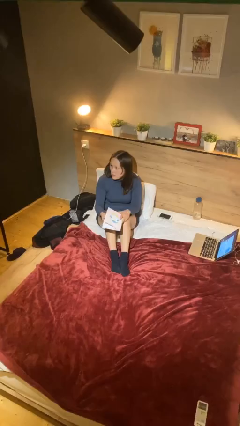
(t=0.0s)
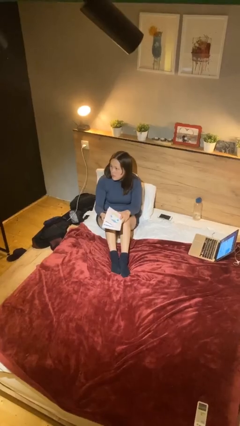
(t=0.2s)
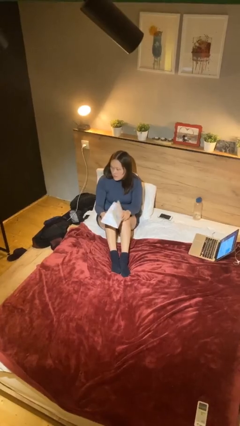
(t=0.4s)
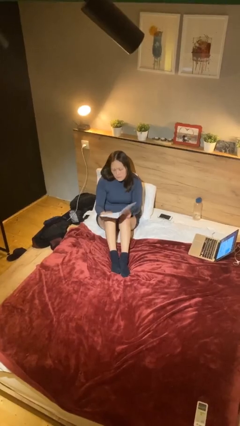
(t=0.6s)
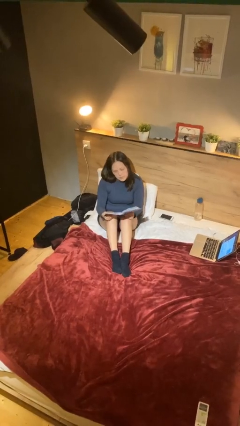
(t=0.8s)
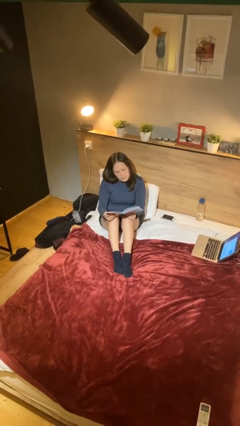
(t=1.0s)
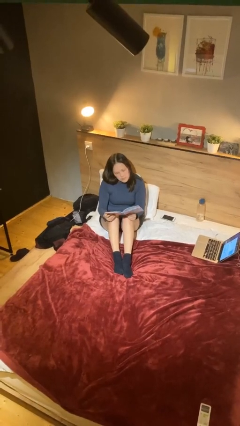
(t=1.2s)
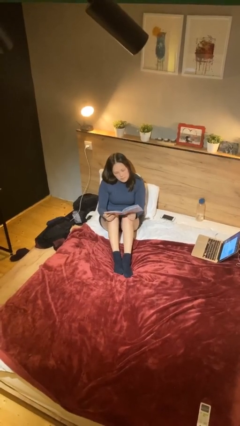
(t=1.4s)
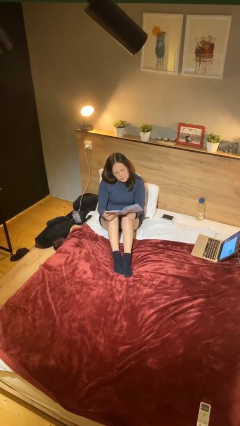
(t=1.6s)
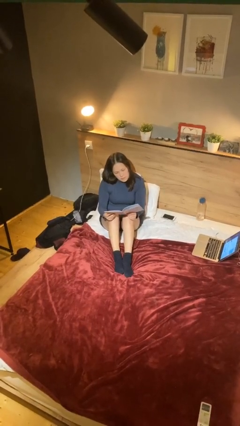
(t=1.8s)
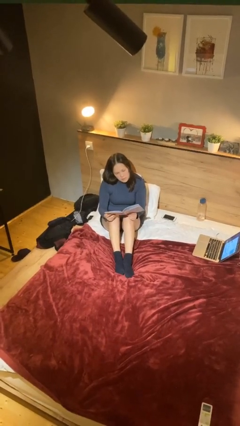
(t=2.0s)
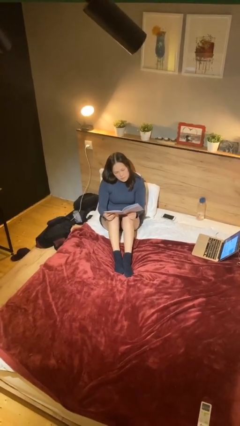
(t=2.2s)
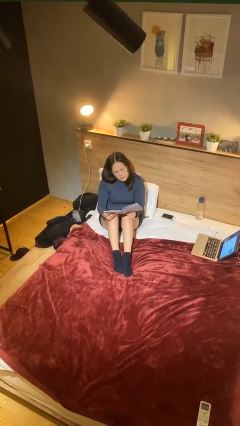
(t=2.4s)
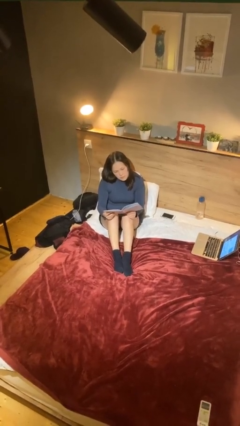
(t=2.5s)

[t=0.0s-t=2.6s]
person reads document

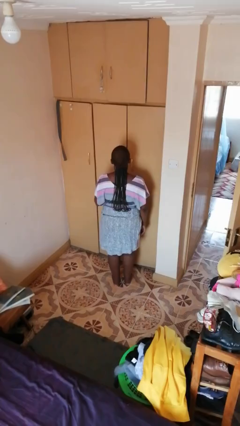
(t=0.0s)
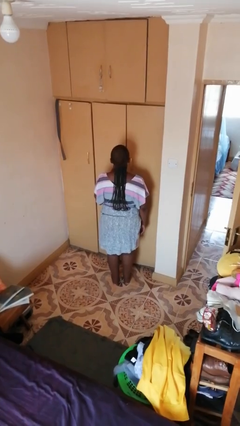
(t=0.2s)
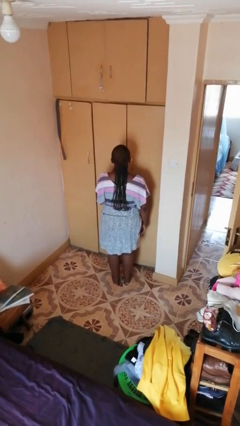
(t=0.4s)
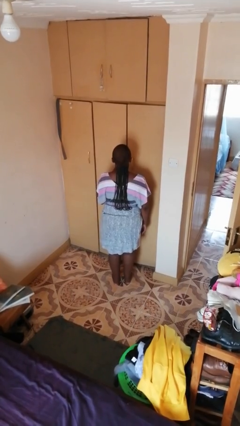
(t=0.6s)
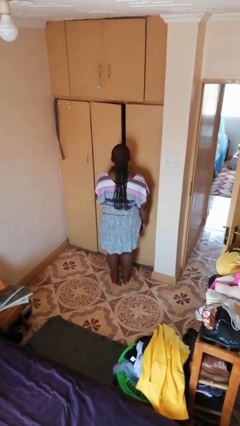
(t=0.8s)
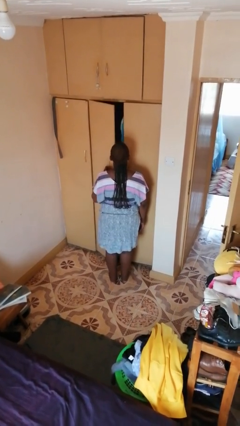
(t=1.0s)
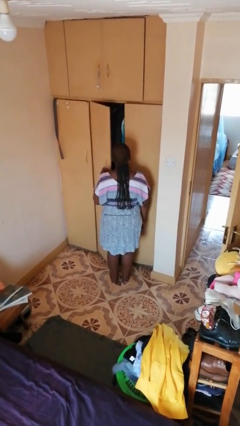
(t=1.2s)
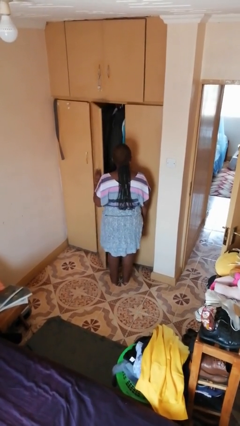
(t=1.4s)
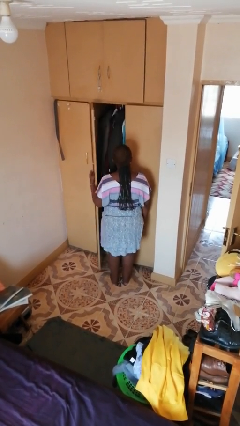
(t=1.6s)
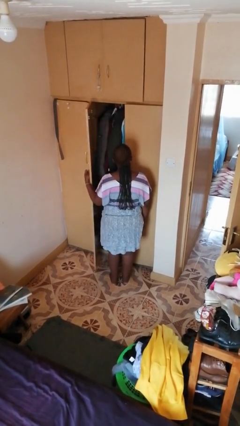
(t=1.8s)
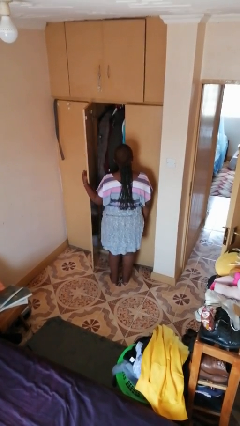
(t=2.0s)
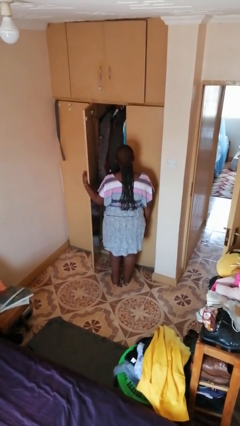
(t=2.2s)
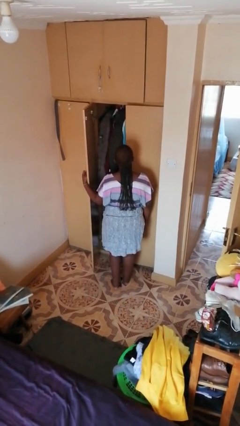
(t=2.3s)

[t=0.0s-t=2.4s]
person opens closet door

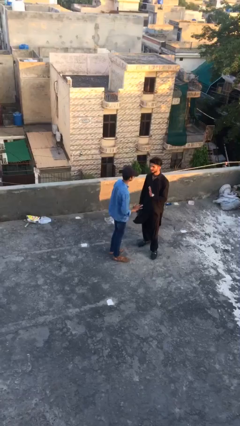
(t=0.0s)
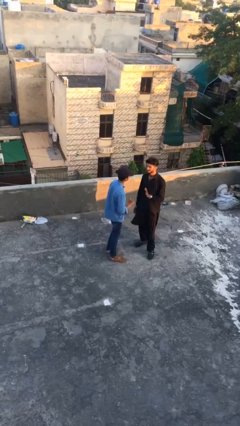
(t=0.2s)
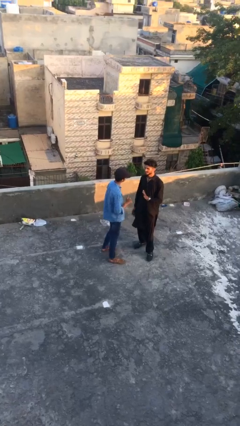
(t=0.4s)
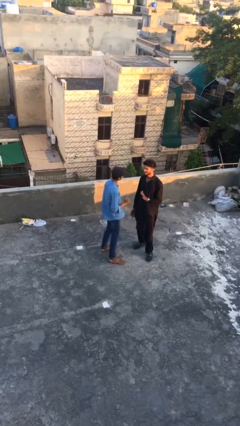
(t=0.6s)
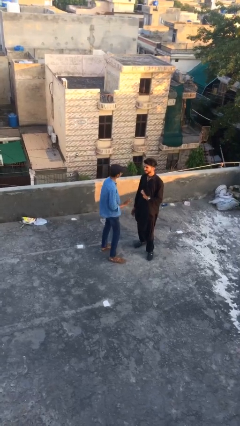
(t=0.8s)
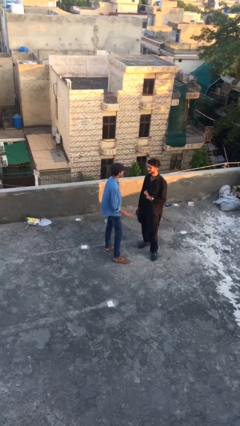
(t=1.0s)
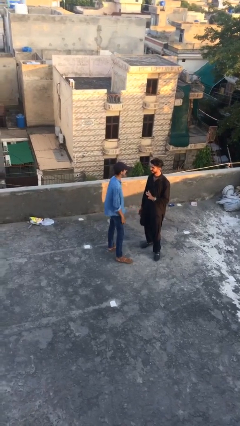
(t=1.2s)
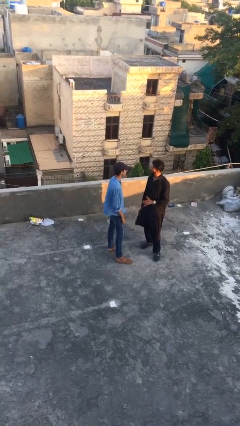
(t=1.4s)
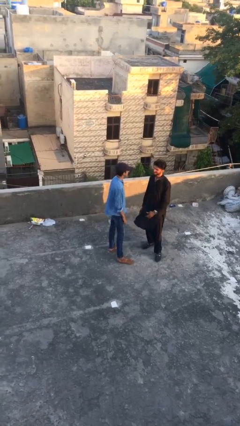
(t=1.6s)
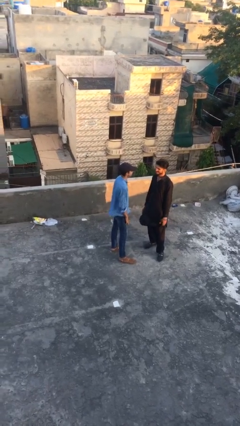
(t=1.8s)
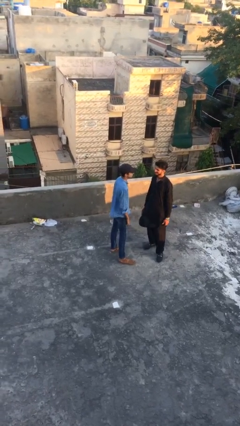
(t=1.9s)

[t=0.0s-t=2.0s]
person talks to person

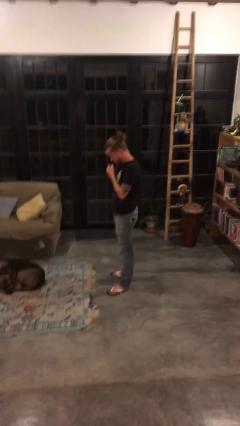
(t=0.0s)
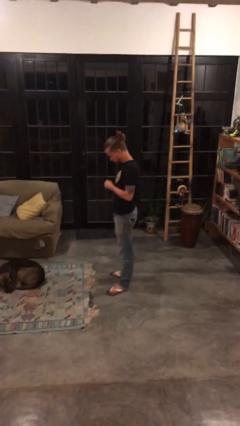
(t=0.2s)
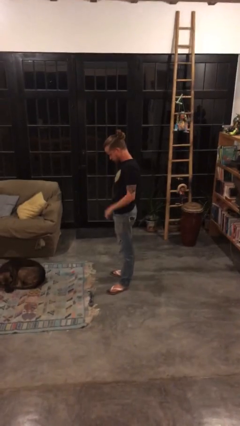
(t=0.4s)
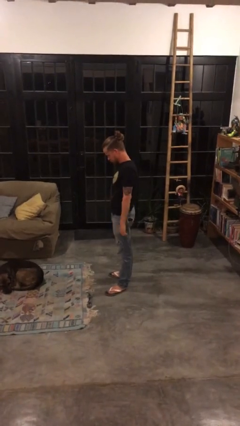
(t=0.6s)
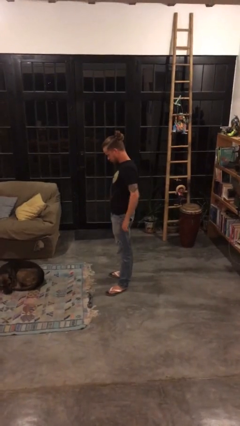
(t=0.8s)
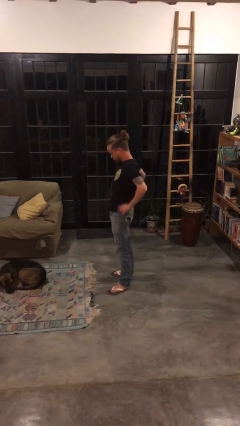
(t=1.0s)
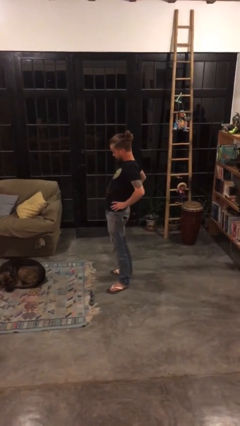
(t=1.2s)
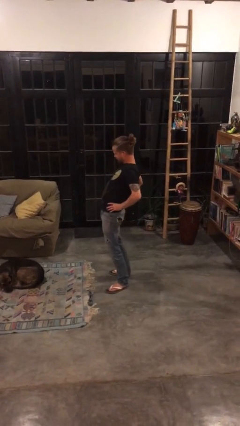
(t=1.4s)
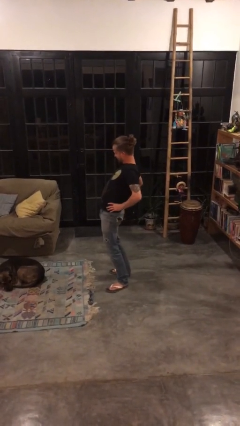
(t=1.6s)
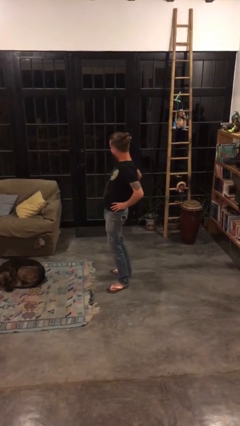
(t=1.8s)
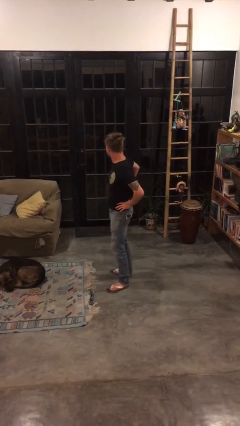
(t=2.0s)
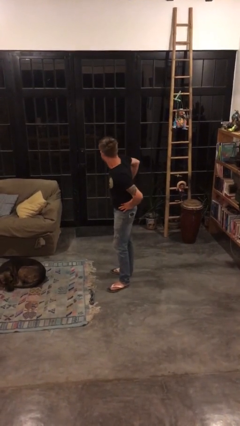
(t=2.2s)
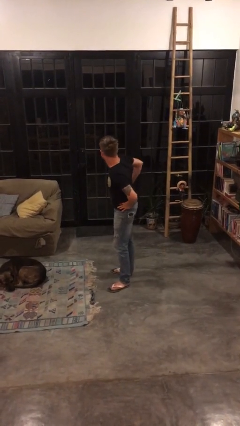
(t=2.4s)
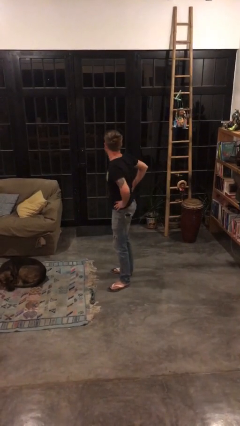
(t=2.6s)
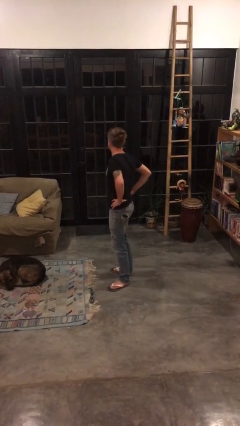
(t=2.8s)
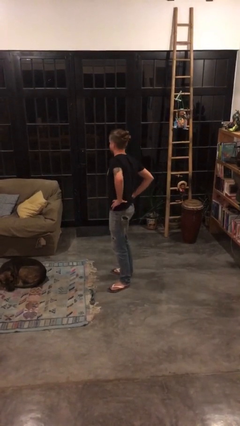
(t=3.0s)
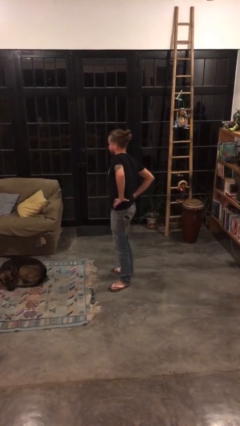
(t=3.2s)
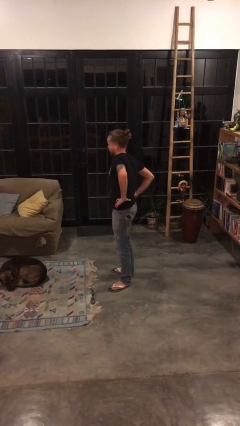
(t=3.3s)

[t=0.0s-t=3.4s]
person stretches back

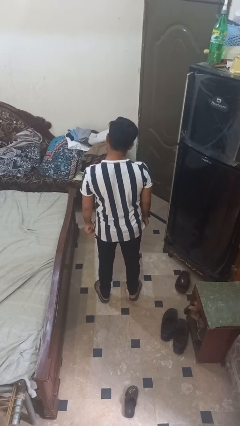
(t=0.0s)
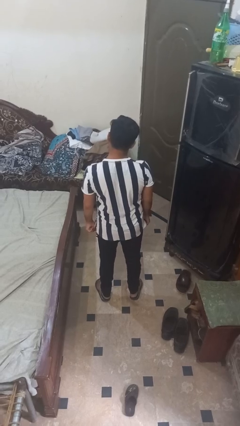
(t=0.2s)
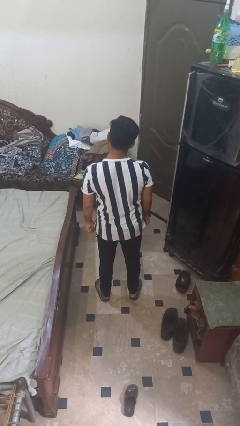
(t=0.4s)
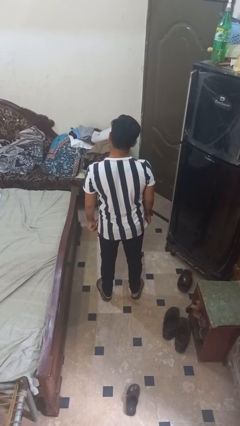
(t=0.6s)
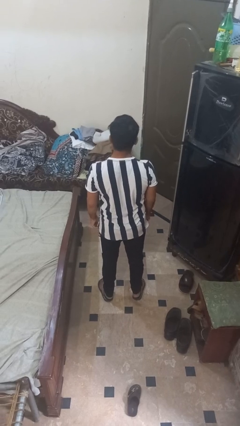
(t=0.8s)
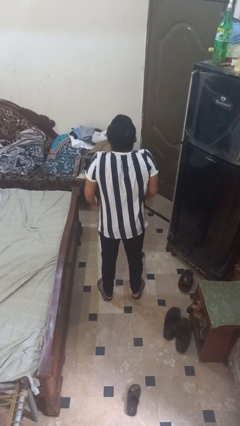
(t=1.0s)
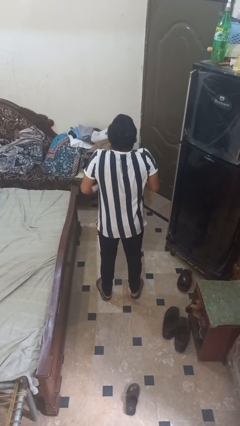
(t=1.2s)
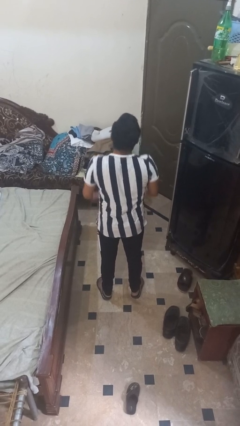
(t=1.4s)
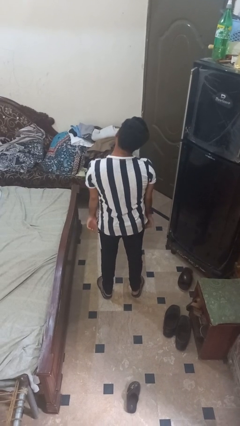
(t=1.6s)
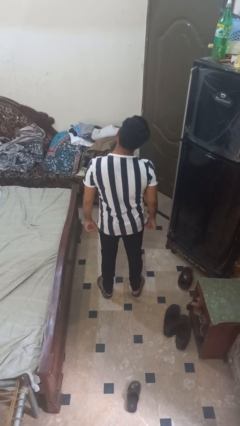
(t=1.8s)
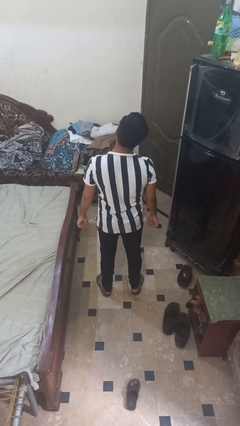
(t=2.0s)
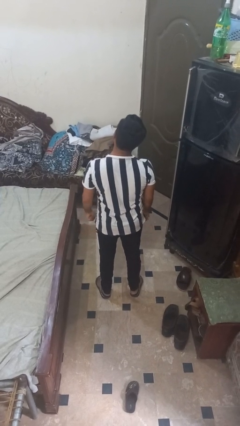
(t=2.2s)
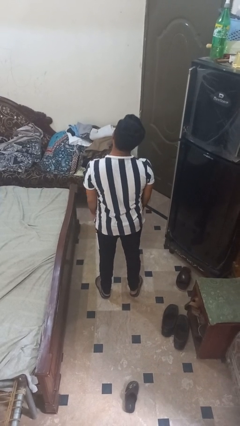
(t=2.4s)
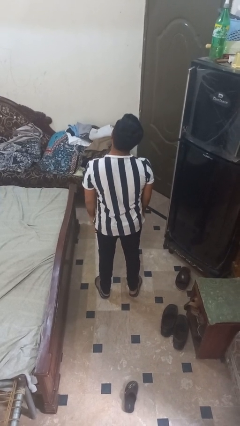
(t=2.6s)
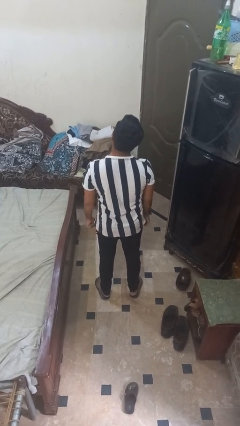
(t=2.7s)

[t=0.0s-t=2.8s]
person shrugs

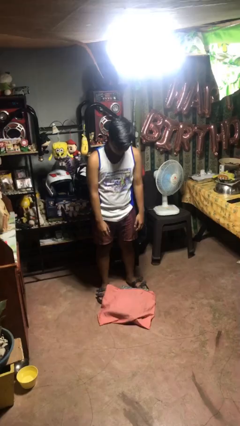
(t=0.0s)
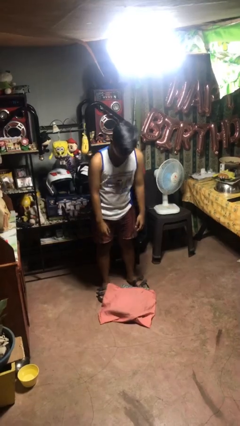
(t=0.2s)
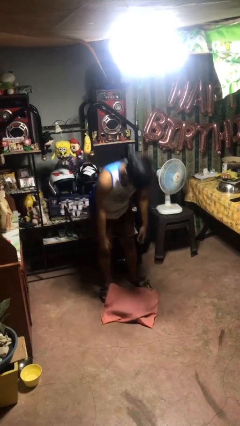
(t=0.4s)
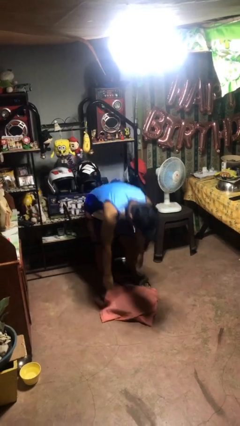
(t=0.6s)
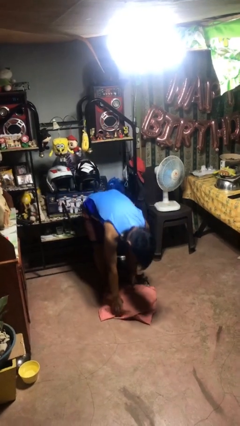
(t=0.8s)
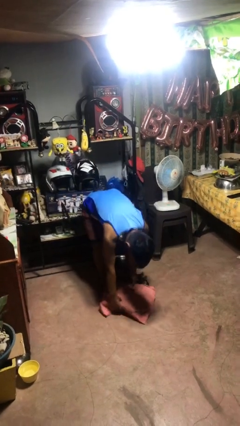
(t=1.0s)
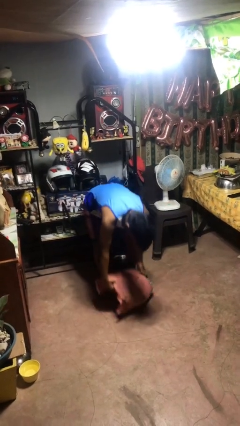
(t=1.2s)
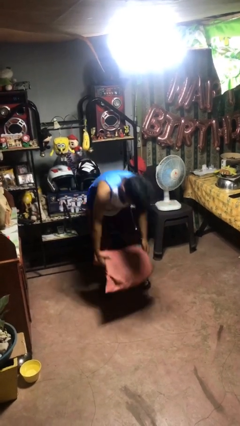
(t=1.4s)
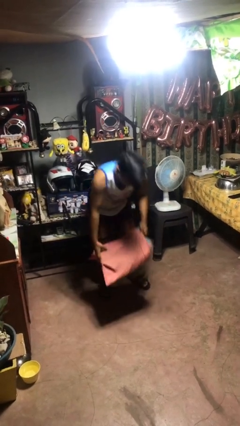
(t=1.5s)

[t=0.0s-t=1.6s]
person picks up object from floor

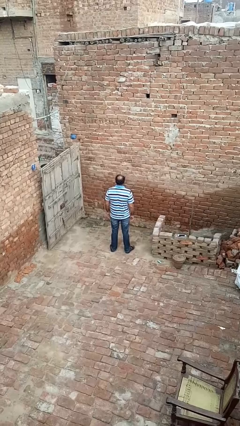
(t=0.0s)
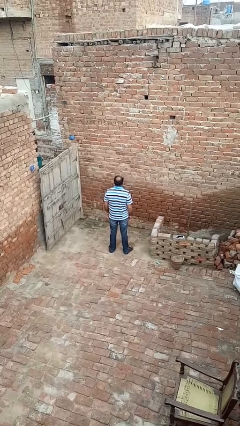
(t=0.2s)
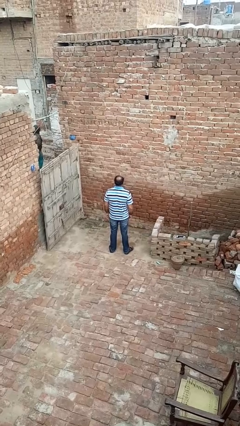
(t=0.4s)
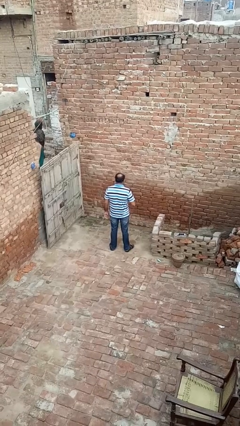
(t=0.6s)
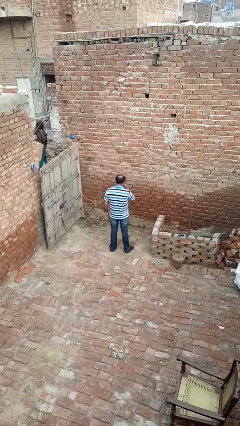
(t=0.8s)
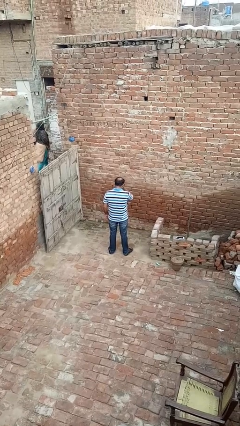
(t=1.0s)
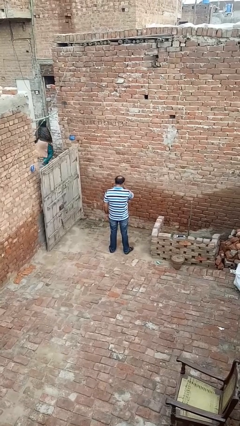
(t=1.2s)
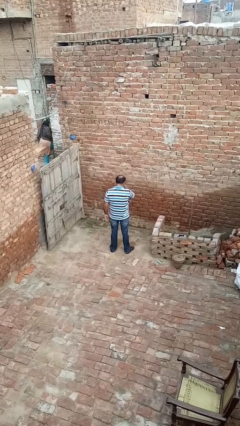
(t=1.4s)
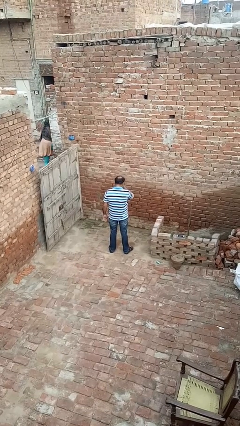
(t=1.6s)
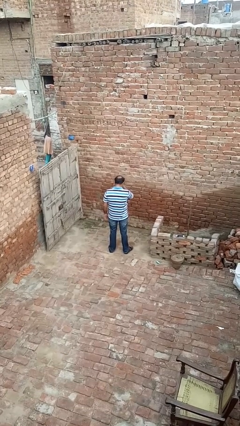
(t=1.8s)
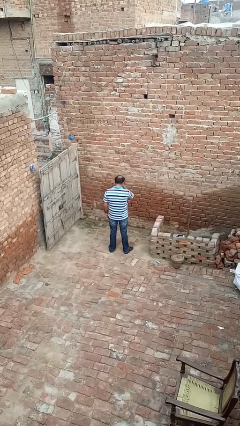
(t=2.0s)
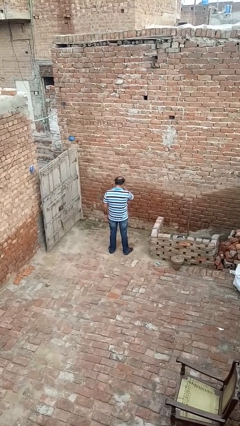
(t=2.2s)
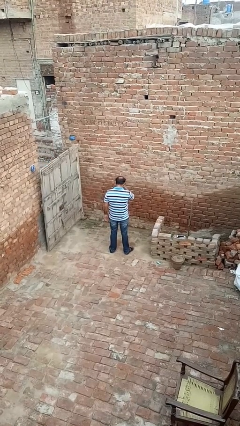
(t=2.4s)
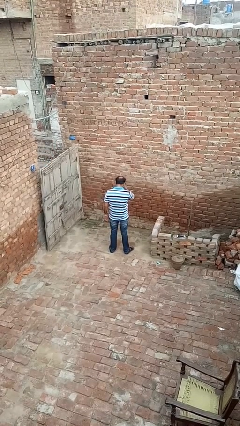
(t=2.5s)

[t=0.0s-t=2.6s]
person rubs eyes
